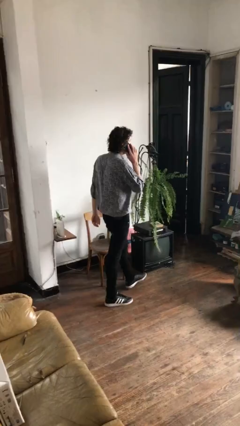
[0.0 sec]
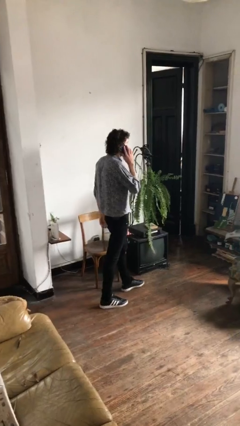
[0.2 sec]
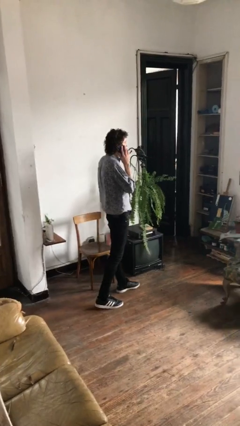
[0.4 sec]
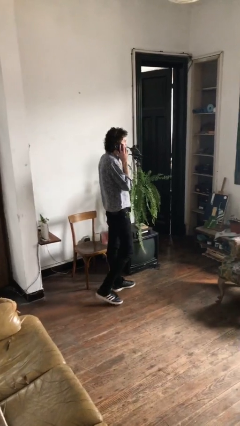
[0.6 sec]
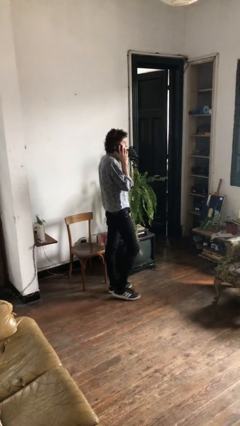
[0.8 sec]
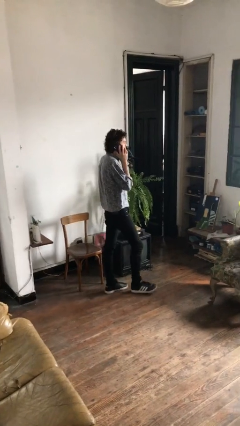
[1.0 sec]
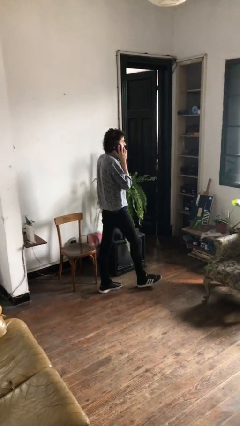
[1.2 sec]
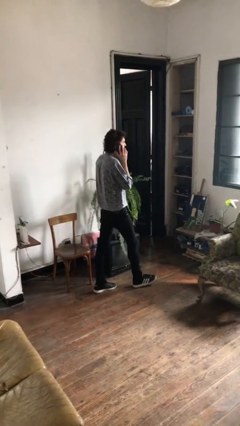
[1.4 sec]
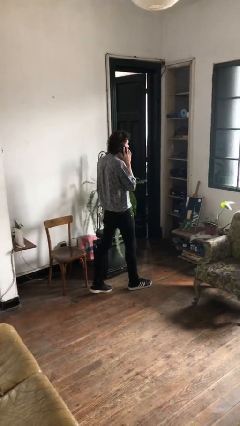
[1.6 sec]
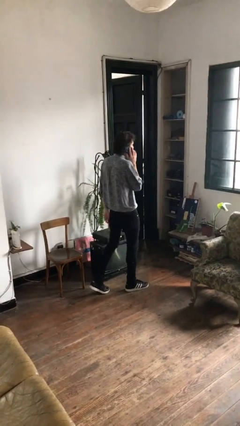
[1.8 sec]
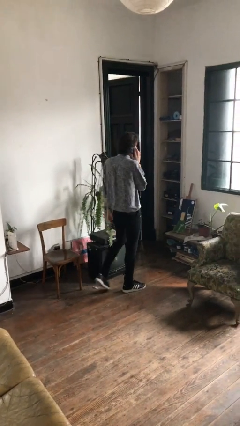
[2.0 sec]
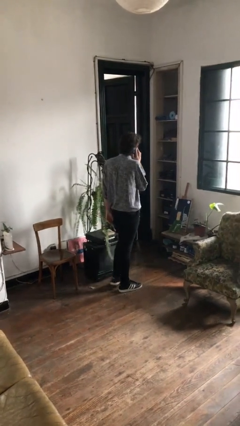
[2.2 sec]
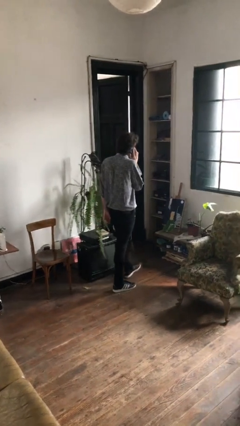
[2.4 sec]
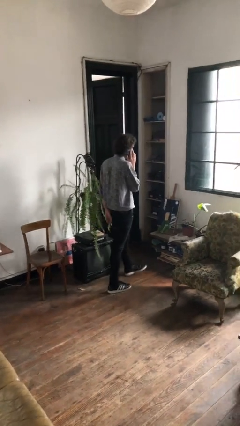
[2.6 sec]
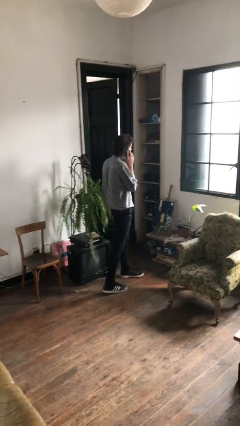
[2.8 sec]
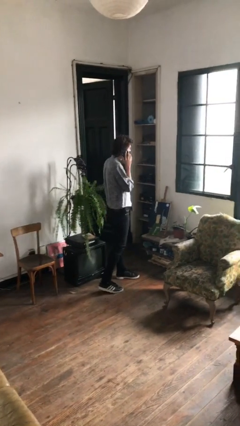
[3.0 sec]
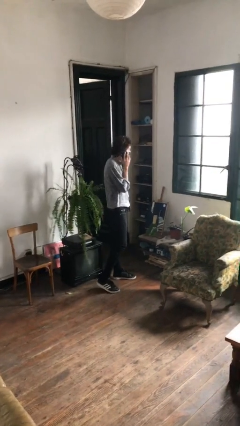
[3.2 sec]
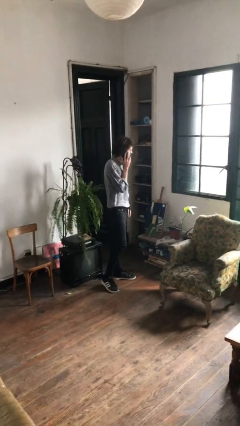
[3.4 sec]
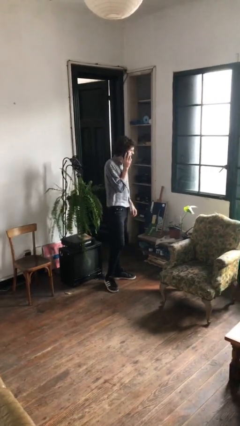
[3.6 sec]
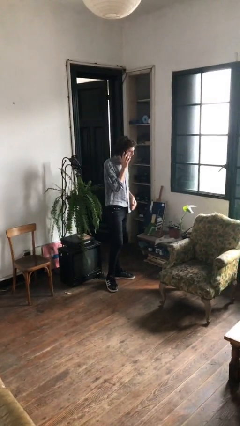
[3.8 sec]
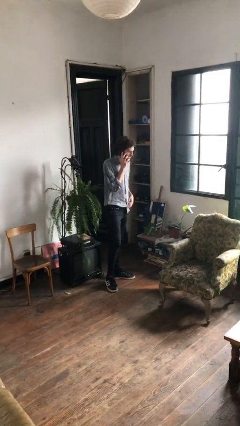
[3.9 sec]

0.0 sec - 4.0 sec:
person talks on phone

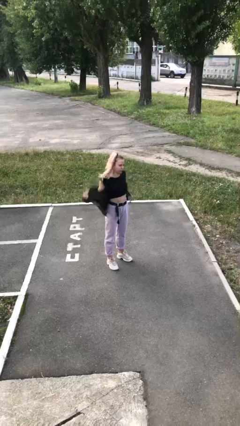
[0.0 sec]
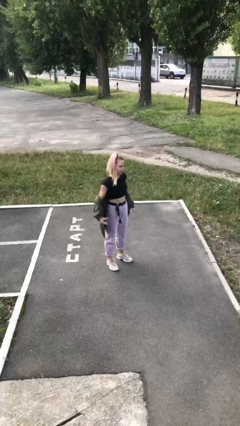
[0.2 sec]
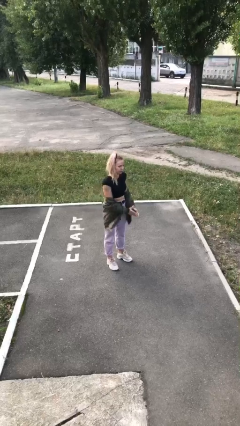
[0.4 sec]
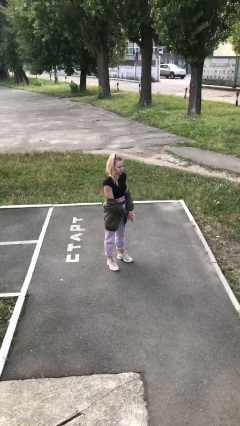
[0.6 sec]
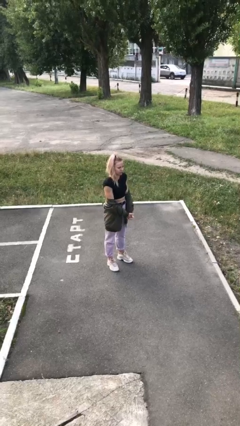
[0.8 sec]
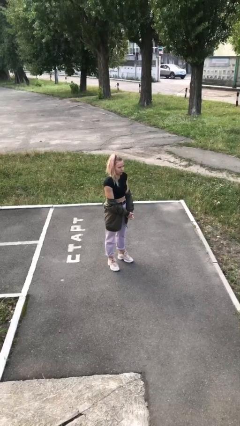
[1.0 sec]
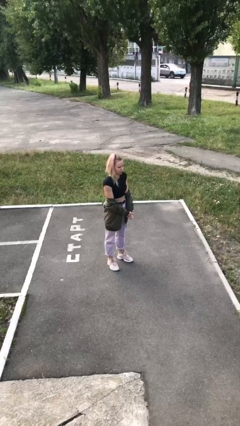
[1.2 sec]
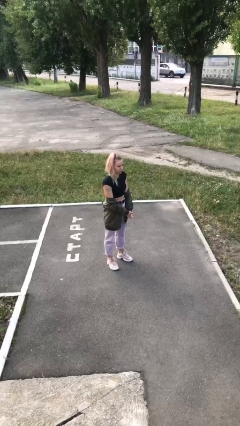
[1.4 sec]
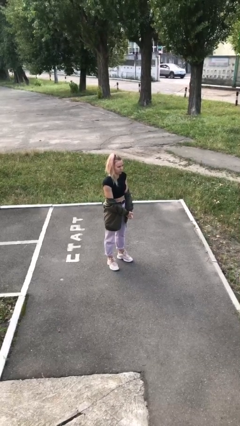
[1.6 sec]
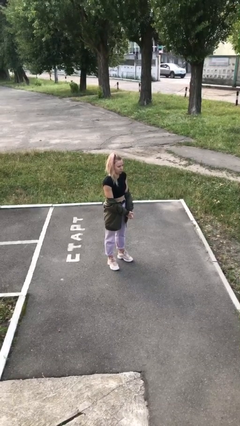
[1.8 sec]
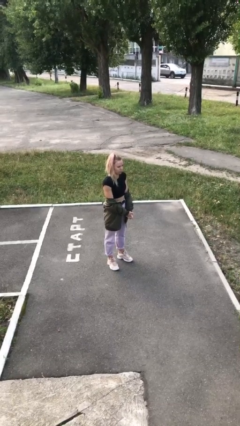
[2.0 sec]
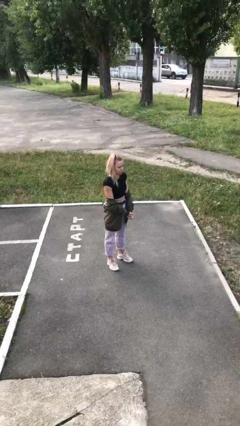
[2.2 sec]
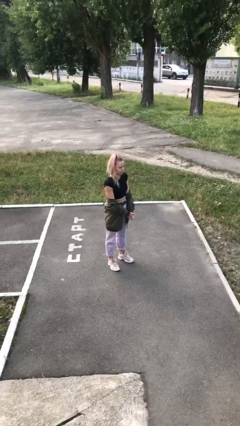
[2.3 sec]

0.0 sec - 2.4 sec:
person takes off jacket

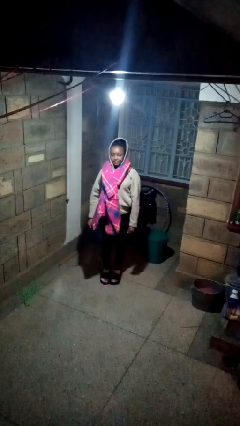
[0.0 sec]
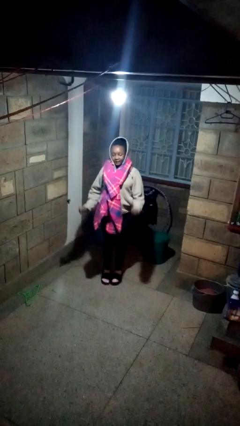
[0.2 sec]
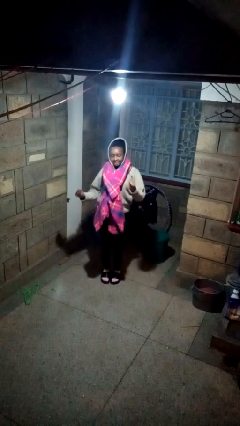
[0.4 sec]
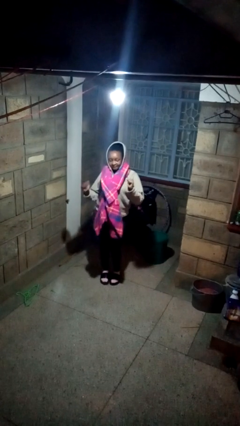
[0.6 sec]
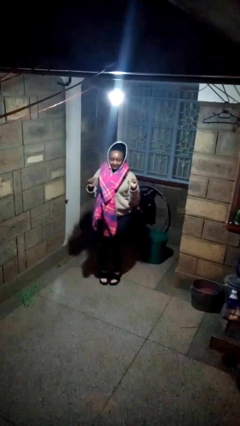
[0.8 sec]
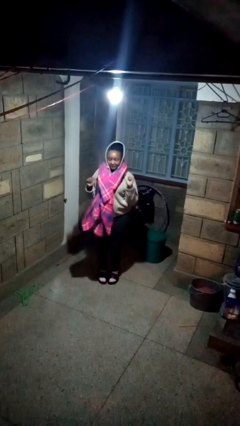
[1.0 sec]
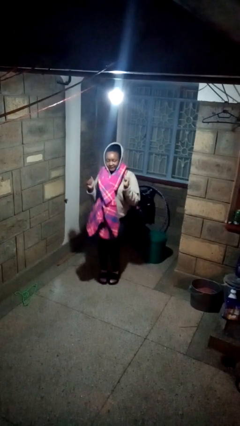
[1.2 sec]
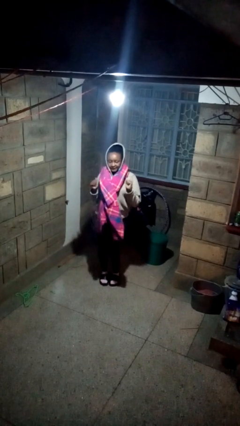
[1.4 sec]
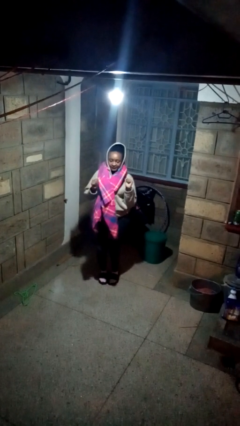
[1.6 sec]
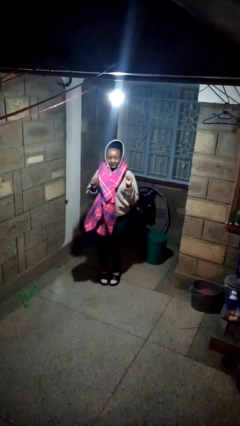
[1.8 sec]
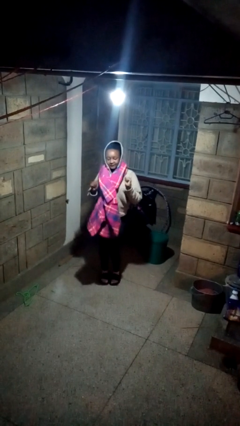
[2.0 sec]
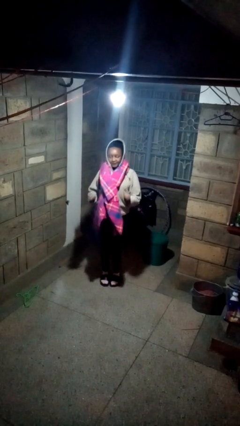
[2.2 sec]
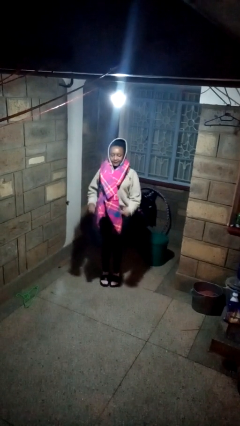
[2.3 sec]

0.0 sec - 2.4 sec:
person wiggles hips

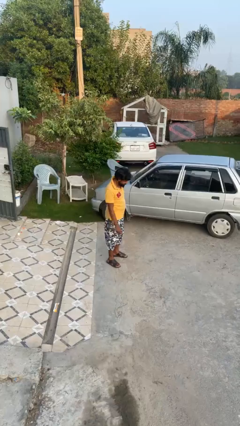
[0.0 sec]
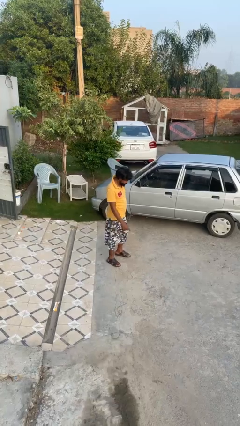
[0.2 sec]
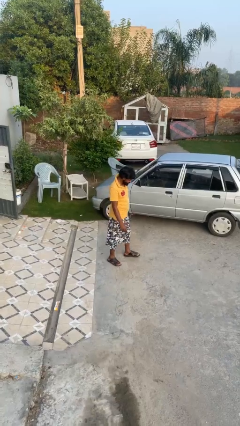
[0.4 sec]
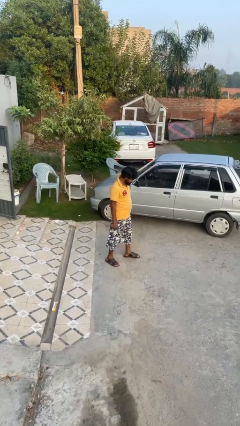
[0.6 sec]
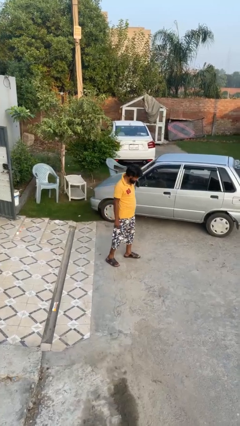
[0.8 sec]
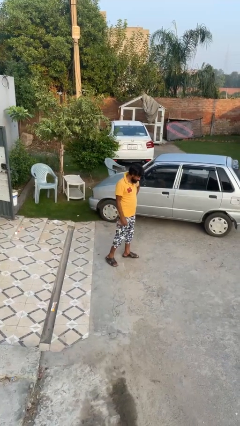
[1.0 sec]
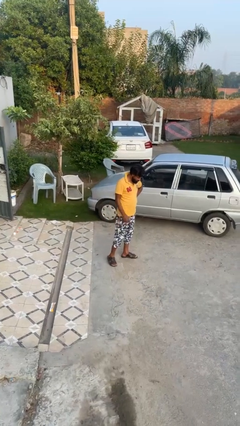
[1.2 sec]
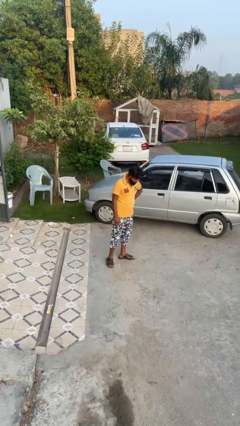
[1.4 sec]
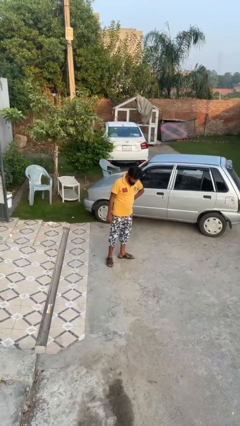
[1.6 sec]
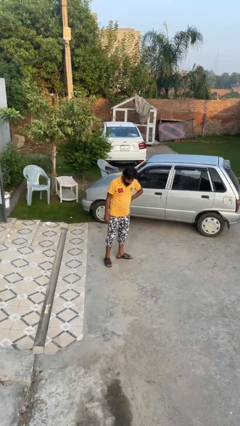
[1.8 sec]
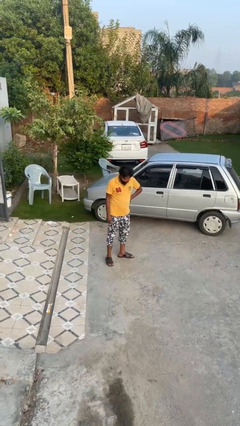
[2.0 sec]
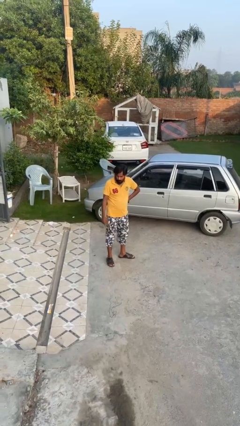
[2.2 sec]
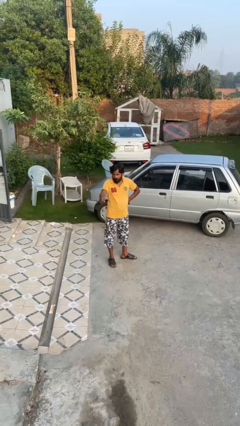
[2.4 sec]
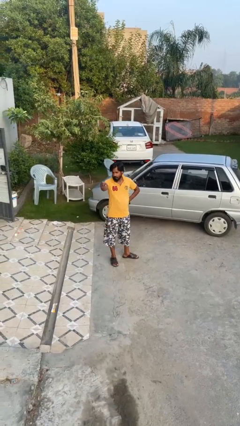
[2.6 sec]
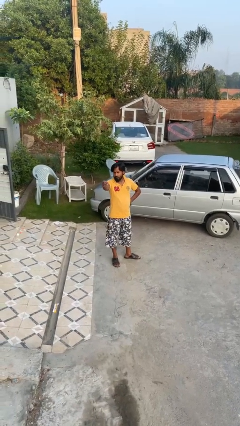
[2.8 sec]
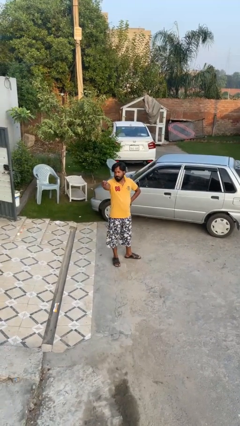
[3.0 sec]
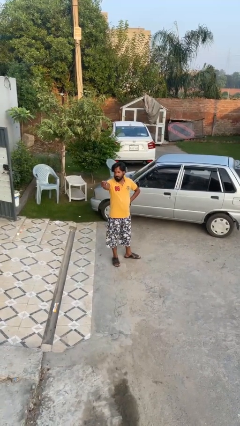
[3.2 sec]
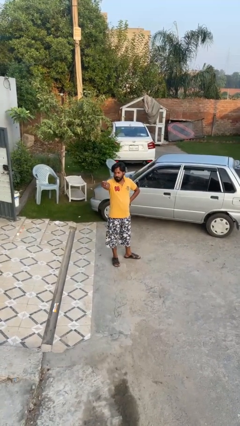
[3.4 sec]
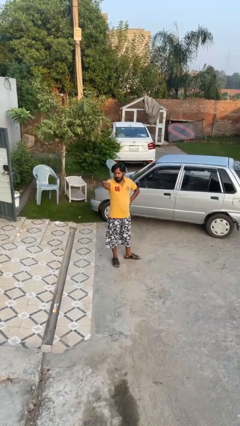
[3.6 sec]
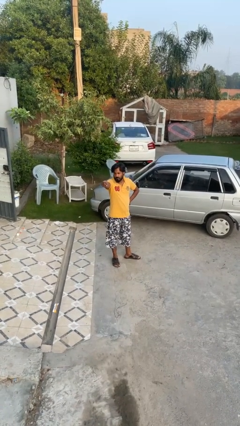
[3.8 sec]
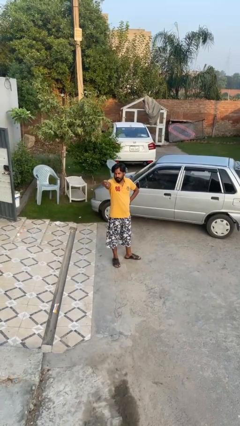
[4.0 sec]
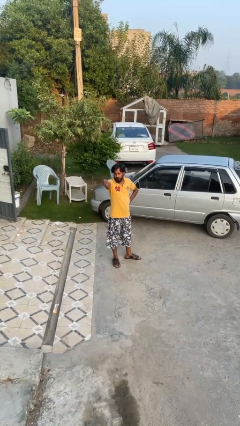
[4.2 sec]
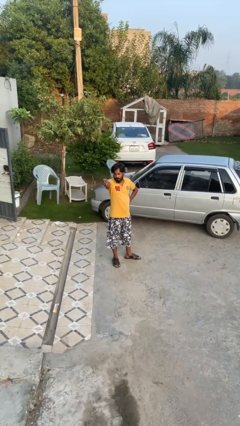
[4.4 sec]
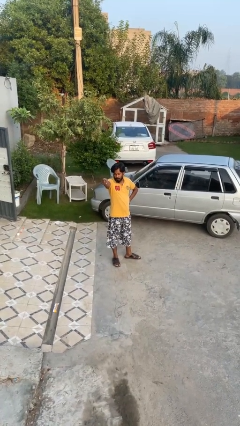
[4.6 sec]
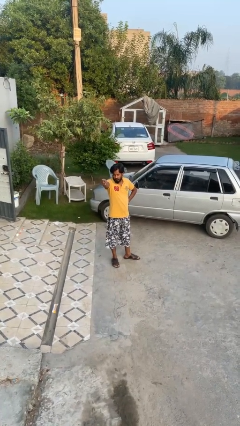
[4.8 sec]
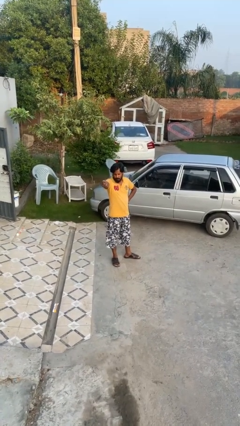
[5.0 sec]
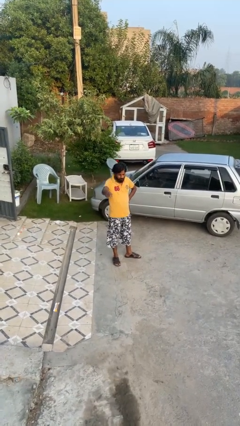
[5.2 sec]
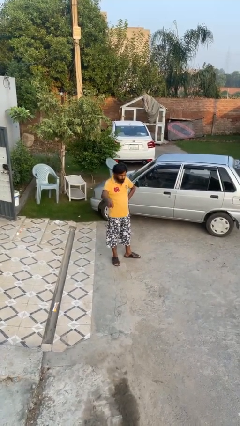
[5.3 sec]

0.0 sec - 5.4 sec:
person points at person

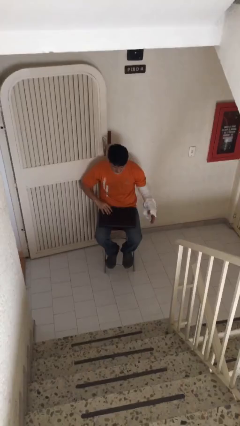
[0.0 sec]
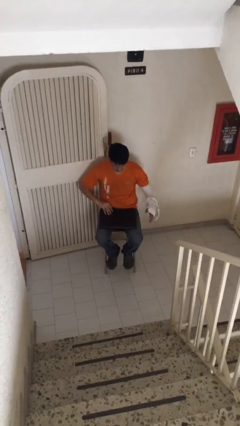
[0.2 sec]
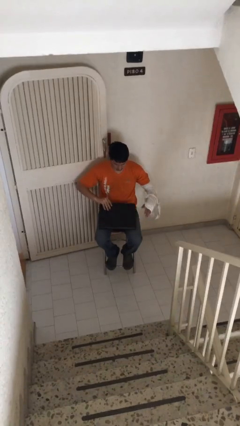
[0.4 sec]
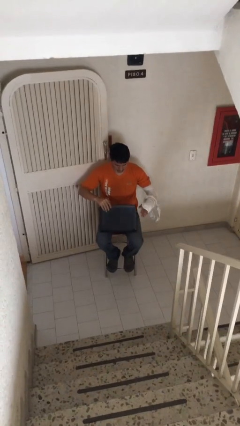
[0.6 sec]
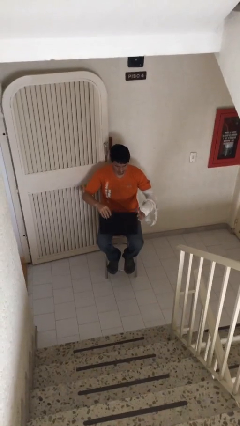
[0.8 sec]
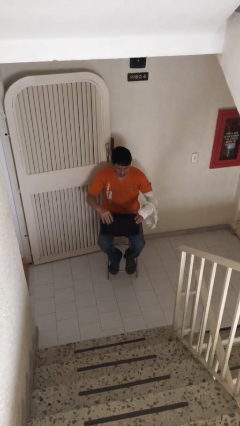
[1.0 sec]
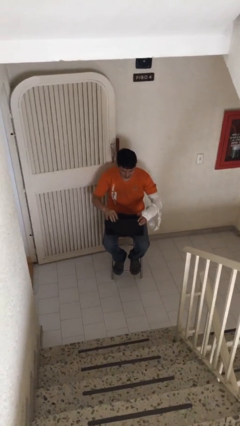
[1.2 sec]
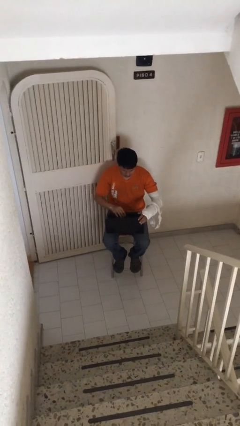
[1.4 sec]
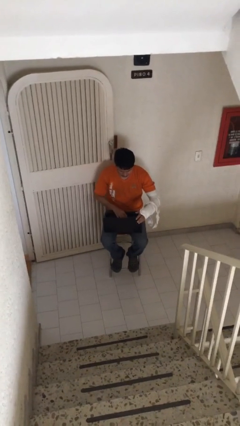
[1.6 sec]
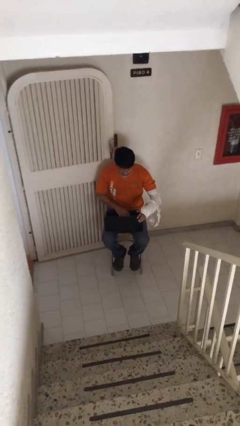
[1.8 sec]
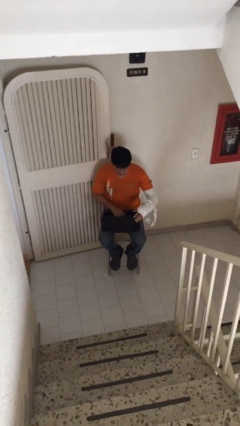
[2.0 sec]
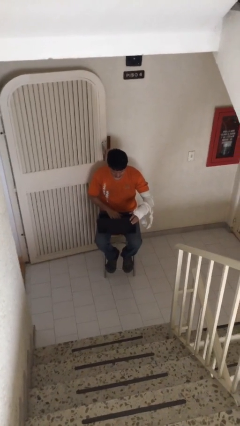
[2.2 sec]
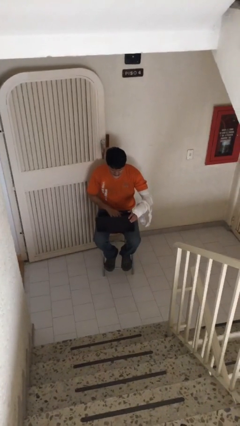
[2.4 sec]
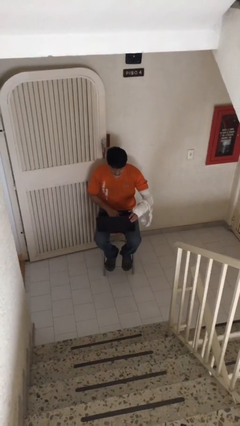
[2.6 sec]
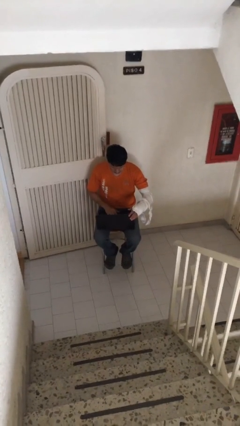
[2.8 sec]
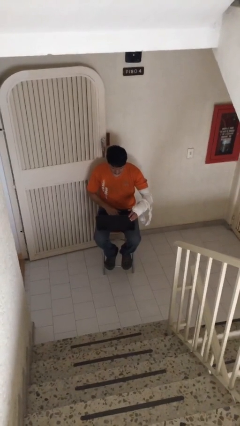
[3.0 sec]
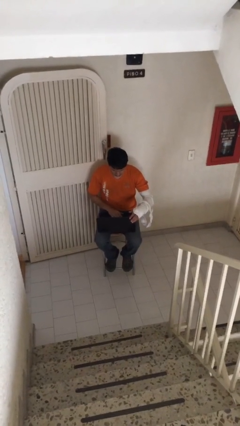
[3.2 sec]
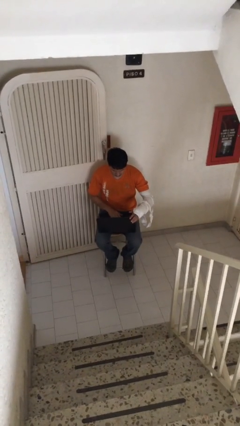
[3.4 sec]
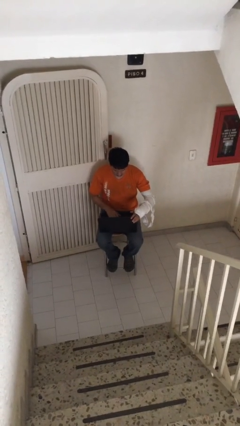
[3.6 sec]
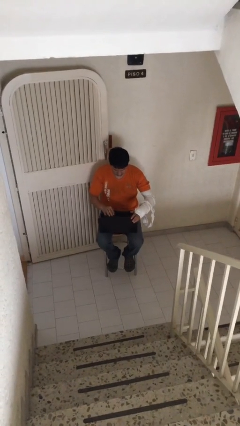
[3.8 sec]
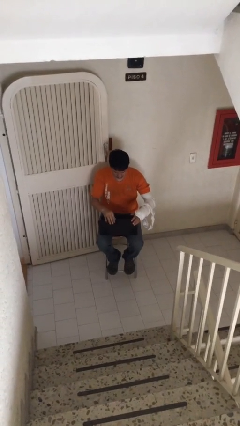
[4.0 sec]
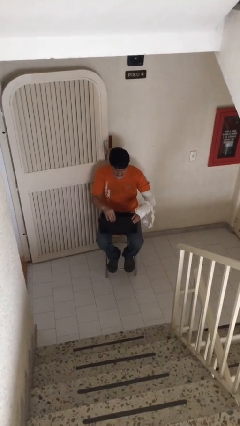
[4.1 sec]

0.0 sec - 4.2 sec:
person interacts with laptop
